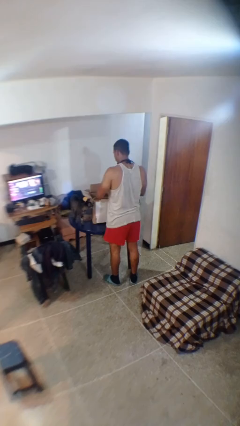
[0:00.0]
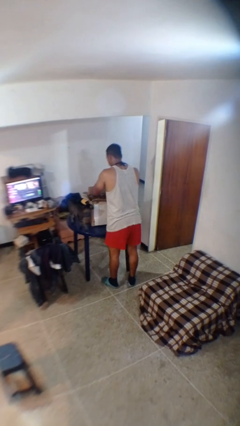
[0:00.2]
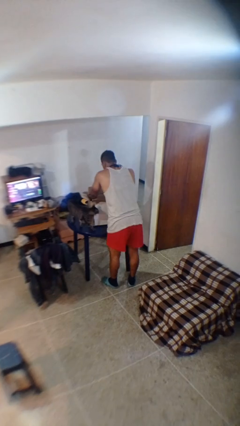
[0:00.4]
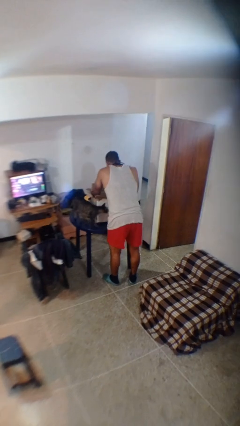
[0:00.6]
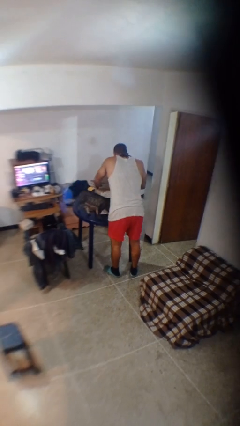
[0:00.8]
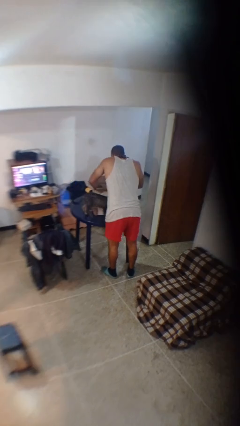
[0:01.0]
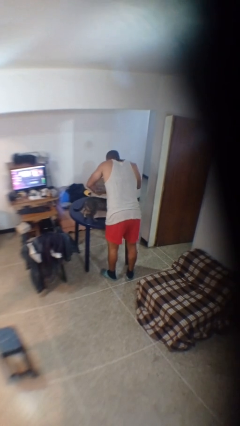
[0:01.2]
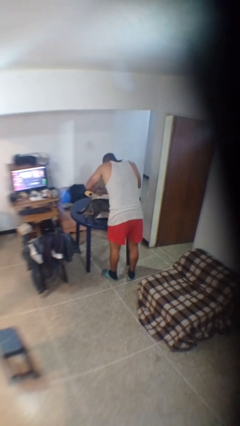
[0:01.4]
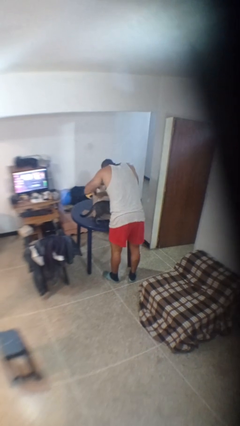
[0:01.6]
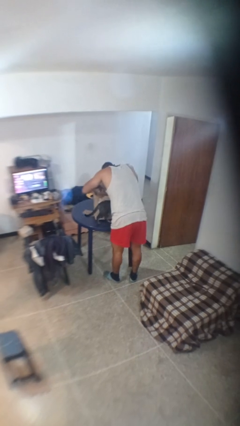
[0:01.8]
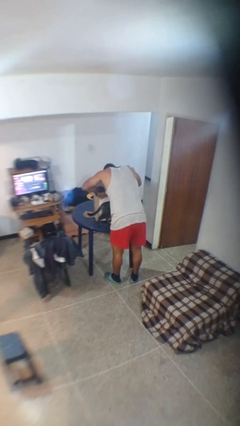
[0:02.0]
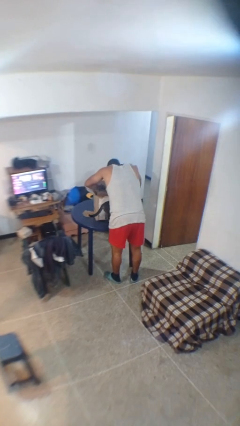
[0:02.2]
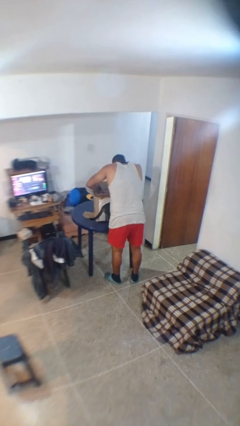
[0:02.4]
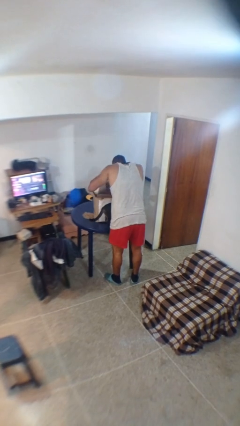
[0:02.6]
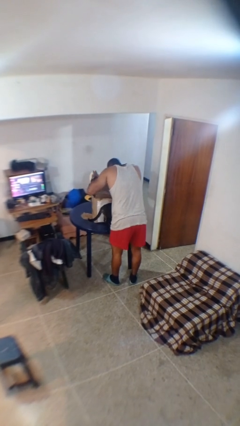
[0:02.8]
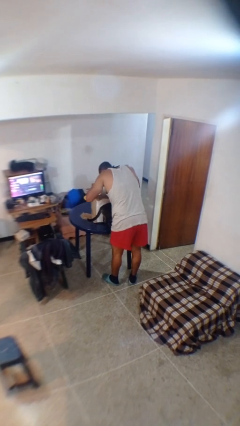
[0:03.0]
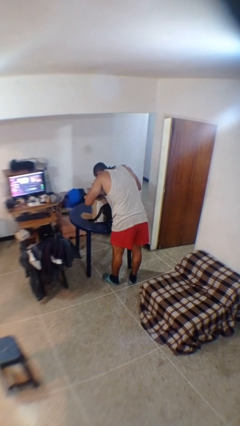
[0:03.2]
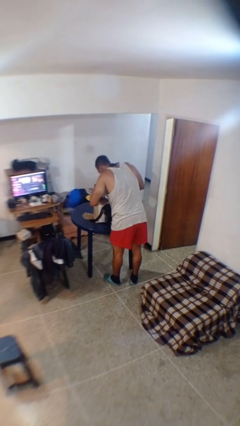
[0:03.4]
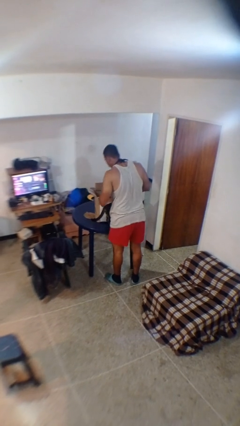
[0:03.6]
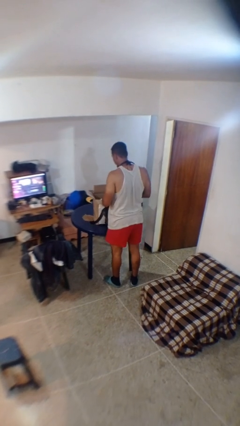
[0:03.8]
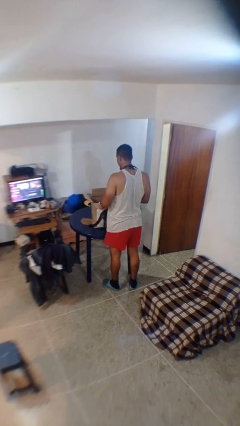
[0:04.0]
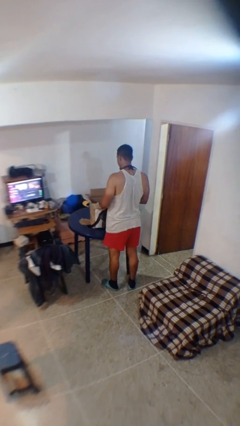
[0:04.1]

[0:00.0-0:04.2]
person searches in box

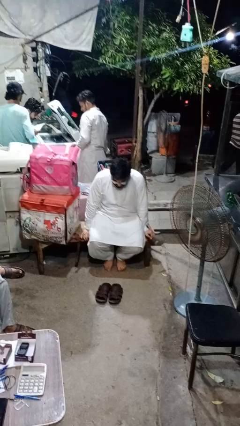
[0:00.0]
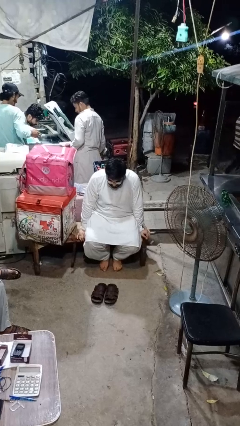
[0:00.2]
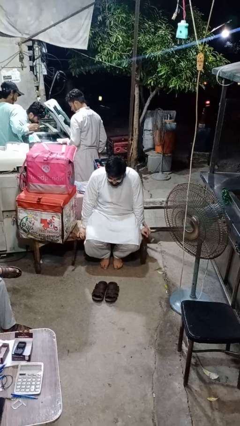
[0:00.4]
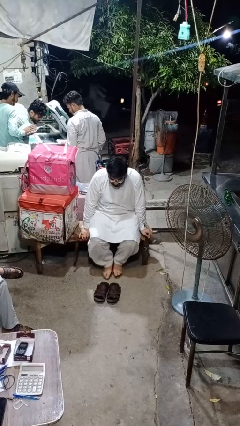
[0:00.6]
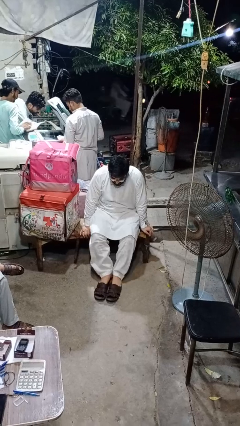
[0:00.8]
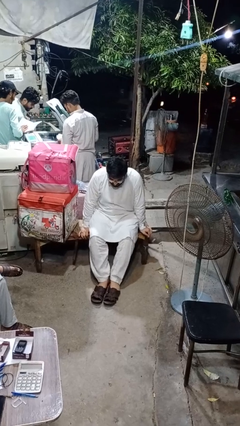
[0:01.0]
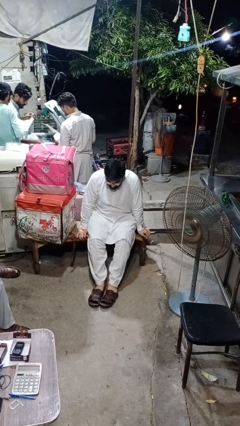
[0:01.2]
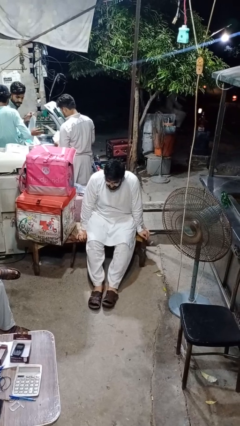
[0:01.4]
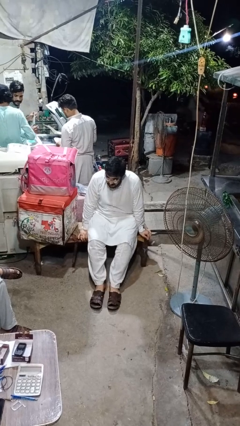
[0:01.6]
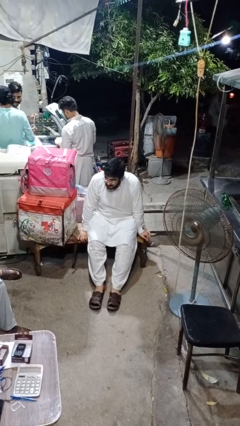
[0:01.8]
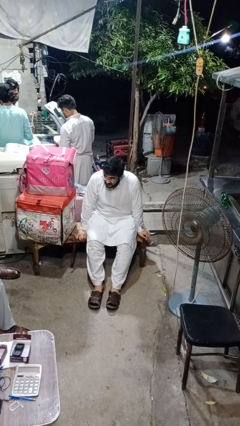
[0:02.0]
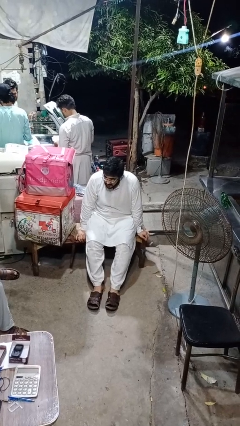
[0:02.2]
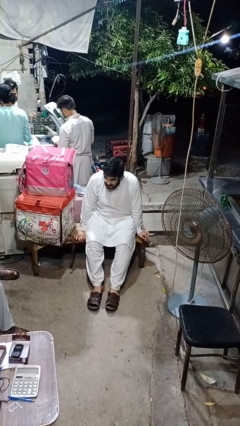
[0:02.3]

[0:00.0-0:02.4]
person puts on shoes

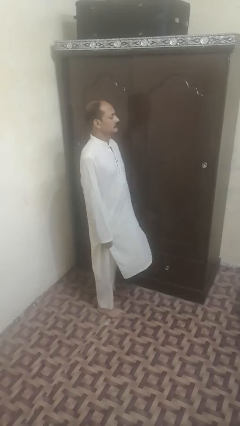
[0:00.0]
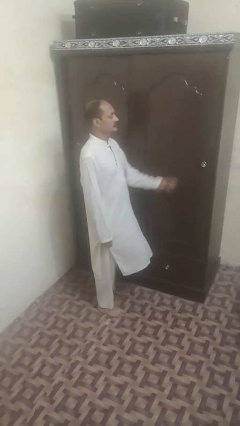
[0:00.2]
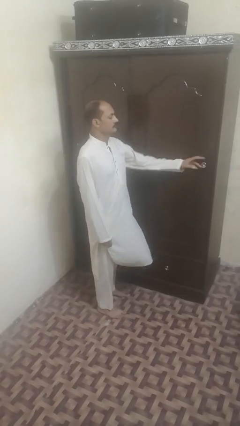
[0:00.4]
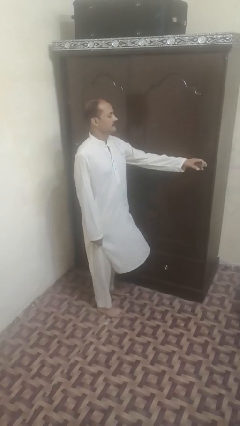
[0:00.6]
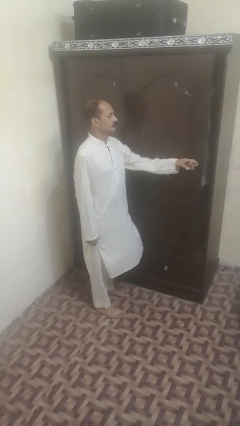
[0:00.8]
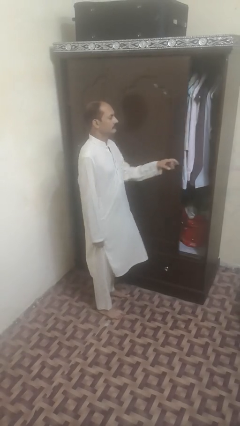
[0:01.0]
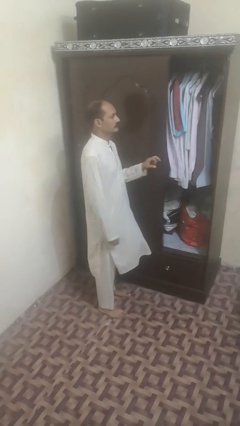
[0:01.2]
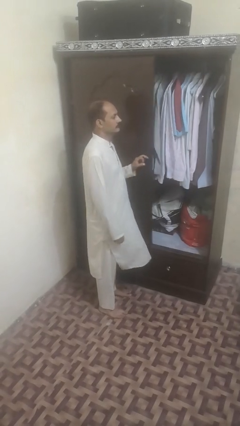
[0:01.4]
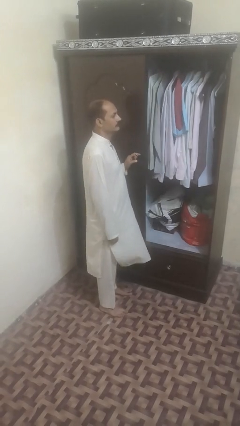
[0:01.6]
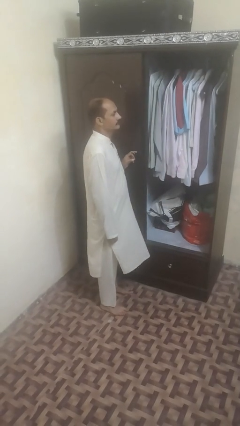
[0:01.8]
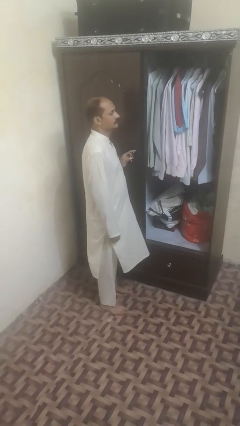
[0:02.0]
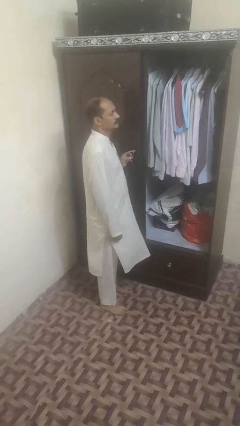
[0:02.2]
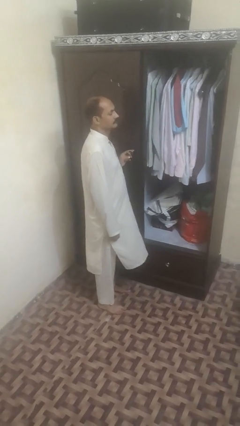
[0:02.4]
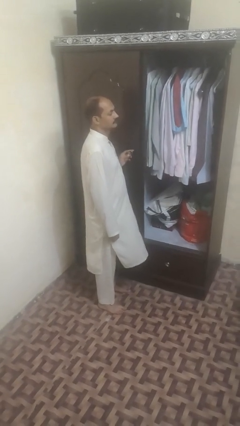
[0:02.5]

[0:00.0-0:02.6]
person opens sliding door

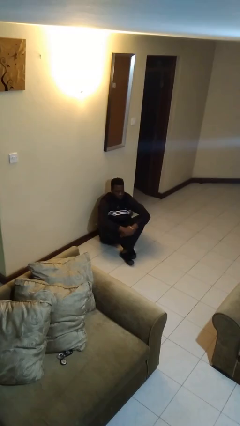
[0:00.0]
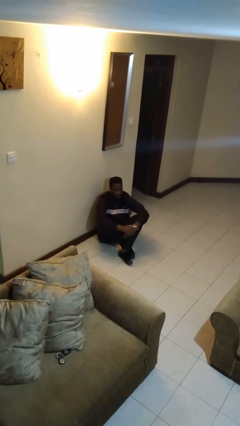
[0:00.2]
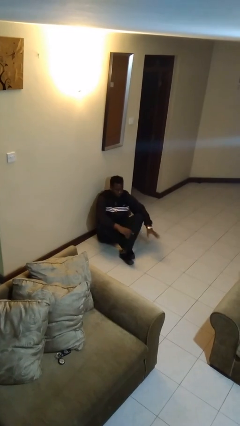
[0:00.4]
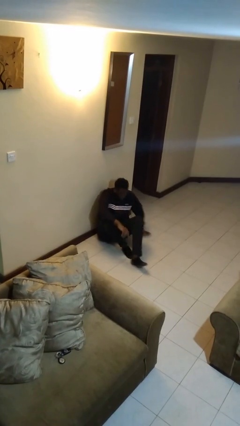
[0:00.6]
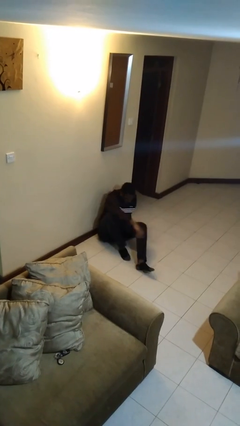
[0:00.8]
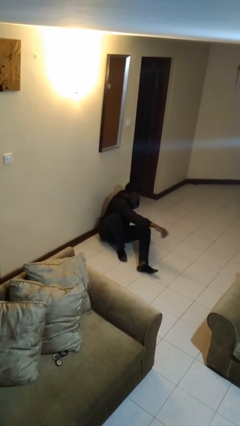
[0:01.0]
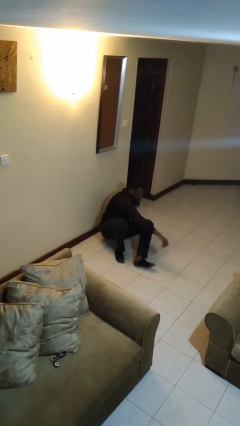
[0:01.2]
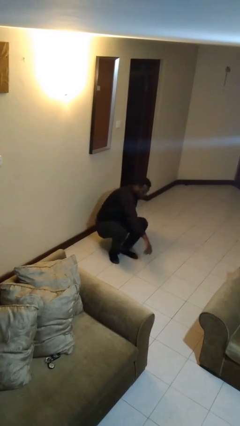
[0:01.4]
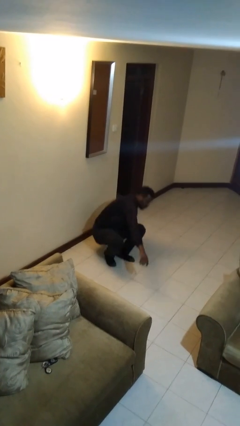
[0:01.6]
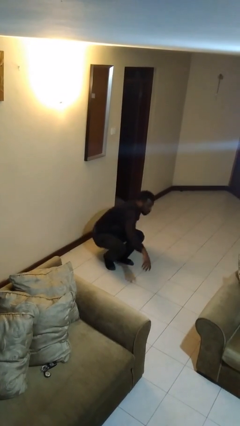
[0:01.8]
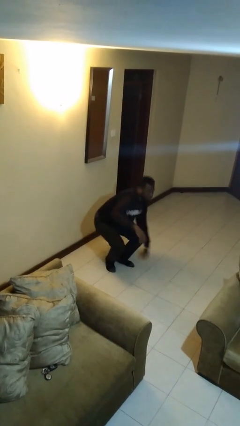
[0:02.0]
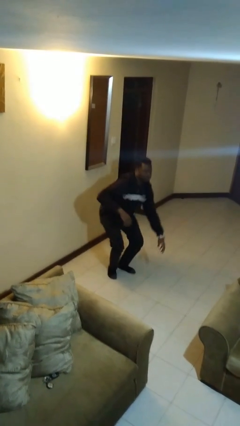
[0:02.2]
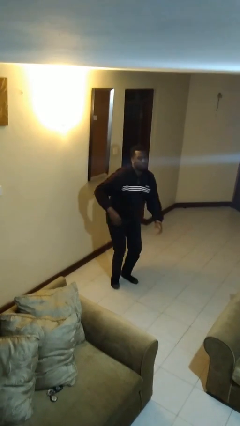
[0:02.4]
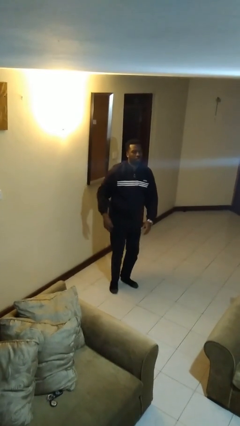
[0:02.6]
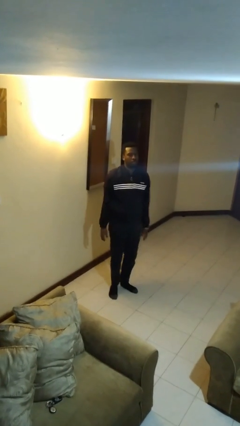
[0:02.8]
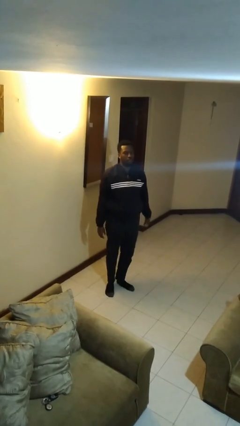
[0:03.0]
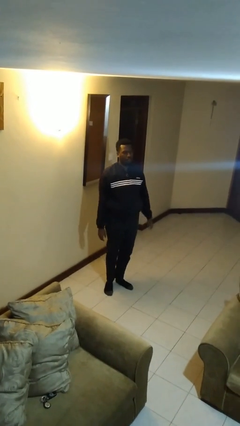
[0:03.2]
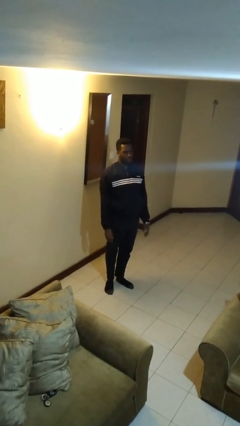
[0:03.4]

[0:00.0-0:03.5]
person stands up from floor

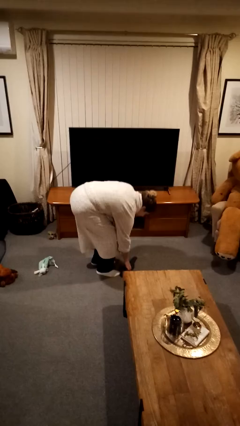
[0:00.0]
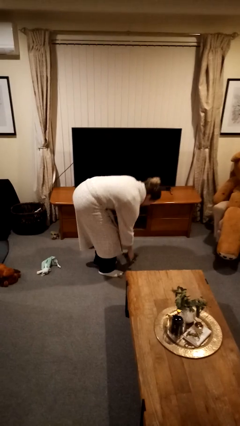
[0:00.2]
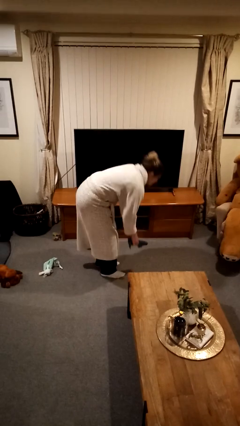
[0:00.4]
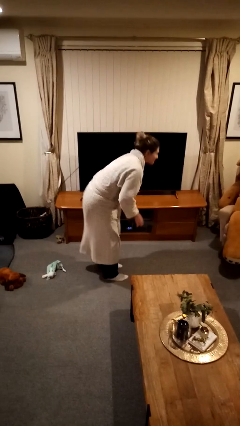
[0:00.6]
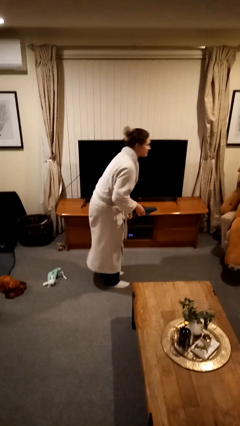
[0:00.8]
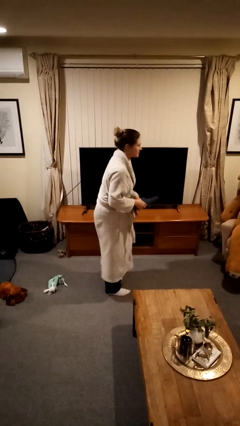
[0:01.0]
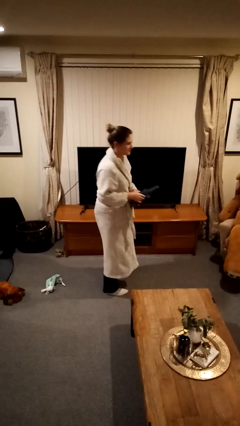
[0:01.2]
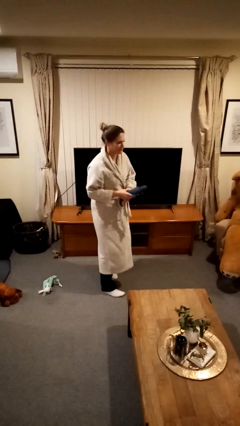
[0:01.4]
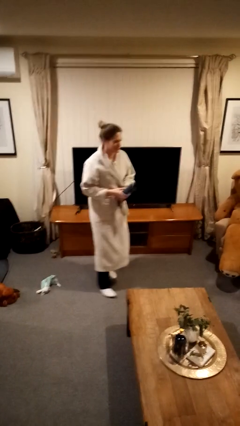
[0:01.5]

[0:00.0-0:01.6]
person picks up object from floor

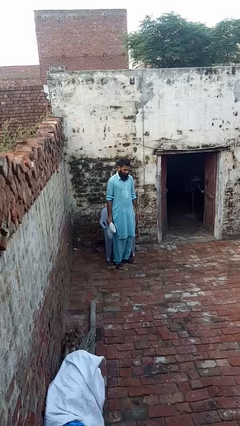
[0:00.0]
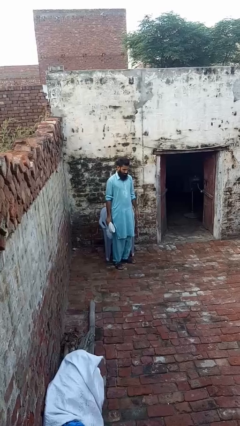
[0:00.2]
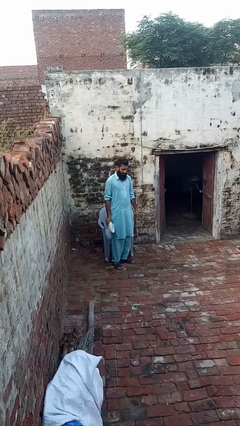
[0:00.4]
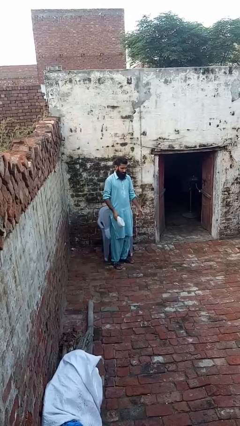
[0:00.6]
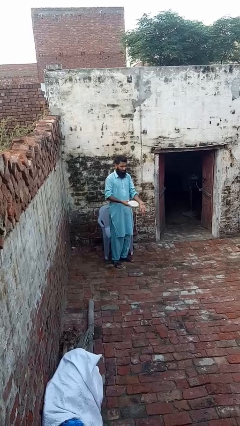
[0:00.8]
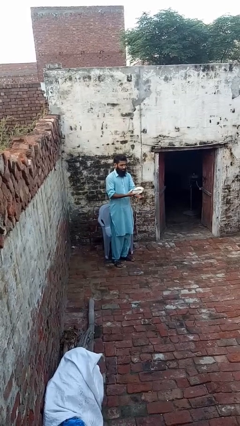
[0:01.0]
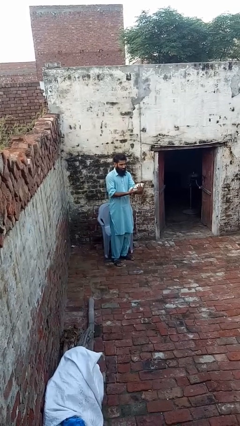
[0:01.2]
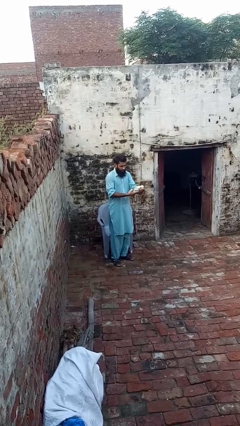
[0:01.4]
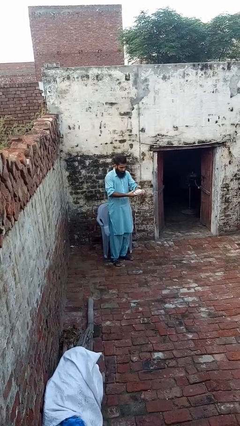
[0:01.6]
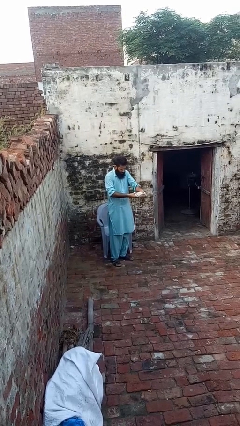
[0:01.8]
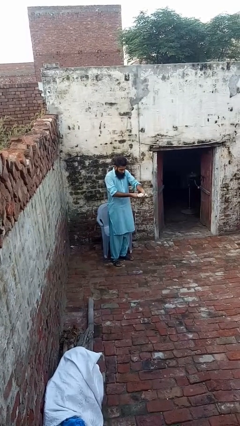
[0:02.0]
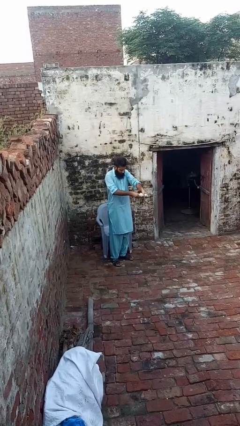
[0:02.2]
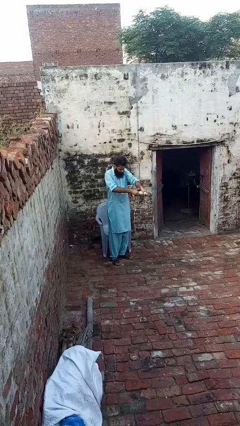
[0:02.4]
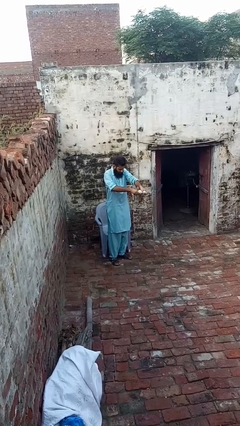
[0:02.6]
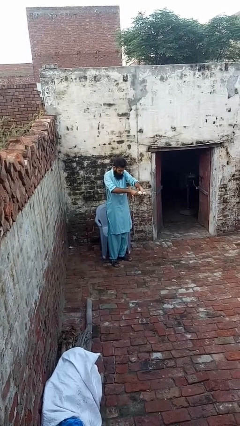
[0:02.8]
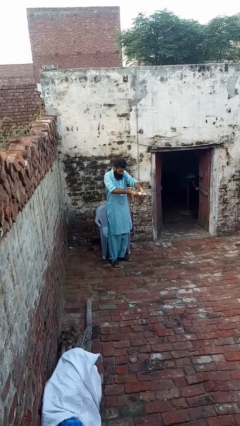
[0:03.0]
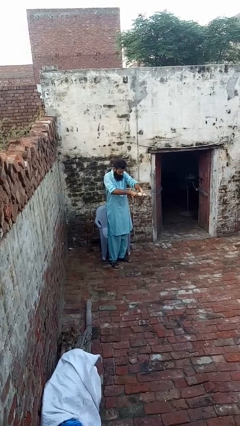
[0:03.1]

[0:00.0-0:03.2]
person squeezes object

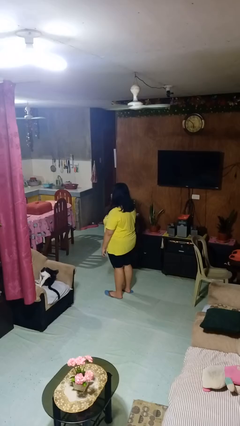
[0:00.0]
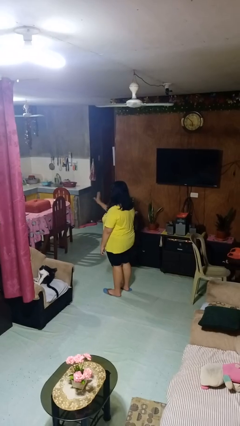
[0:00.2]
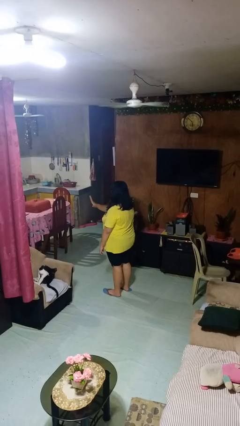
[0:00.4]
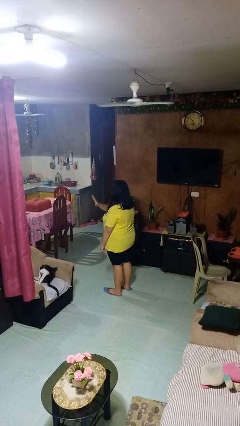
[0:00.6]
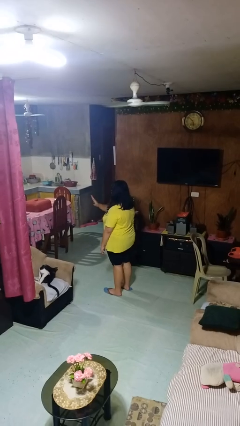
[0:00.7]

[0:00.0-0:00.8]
person gestures swipe left
